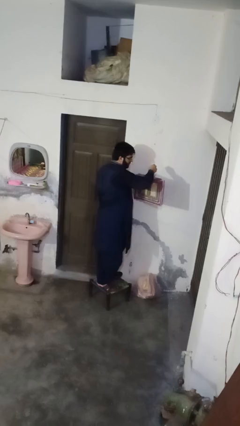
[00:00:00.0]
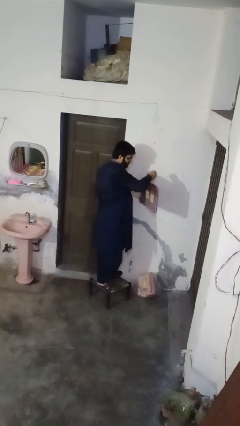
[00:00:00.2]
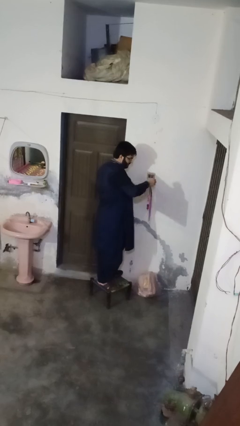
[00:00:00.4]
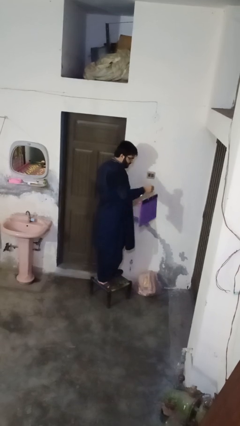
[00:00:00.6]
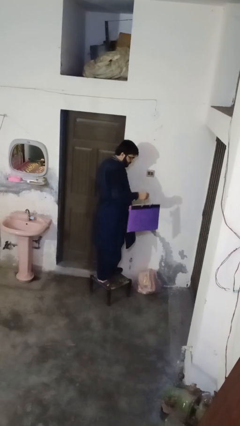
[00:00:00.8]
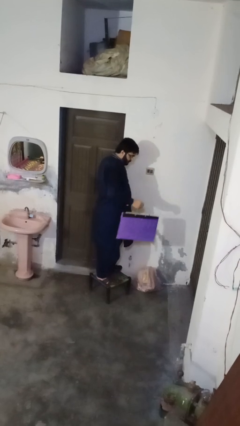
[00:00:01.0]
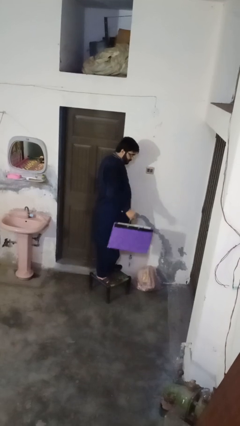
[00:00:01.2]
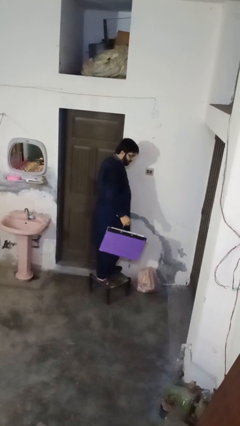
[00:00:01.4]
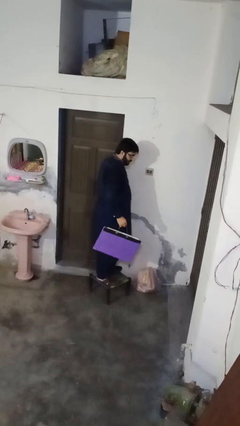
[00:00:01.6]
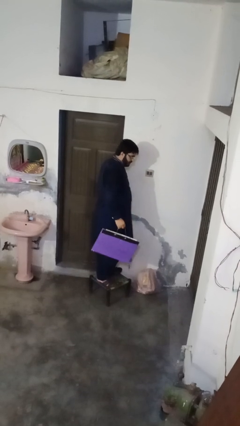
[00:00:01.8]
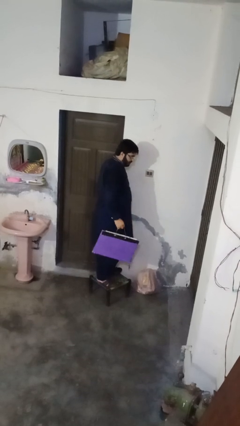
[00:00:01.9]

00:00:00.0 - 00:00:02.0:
person takes down picture frame

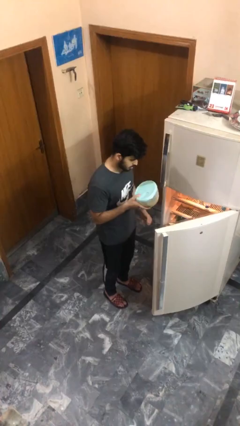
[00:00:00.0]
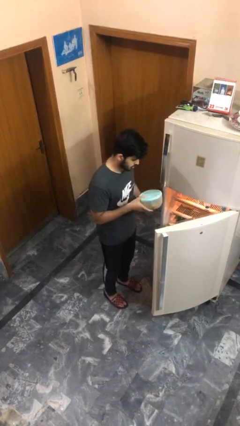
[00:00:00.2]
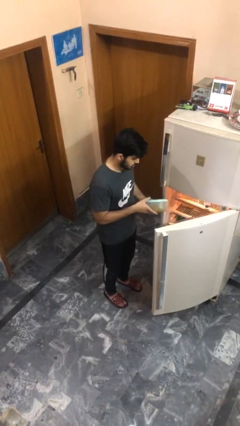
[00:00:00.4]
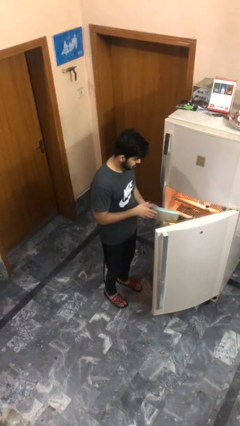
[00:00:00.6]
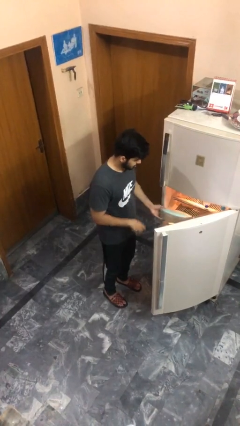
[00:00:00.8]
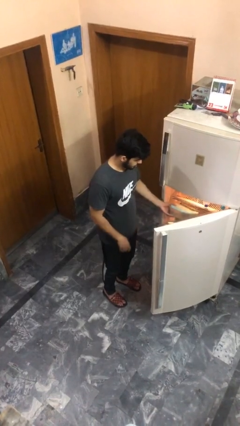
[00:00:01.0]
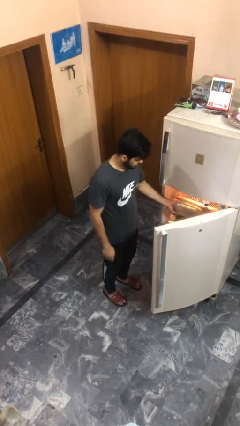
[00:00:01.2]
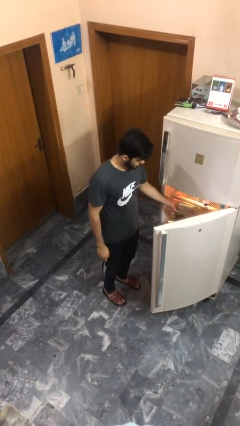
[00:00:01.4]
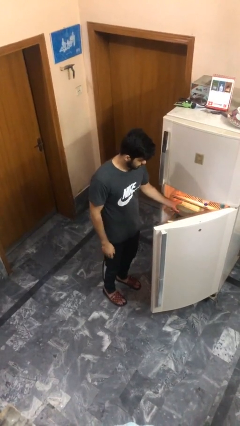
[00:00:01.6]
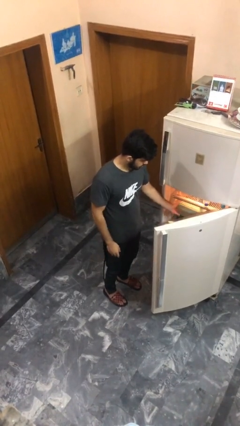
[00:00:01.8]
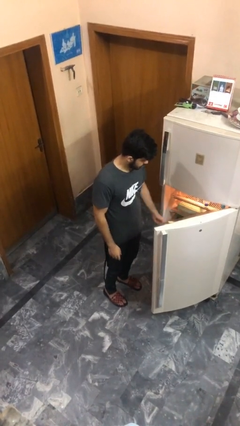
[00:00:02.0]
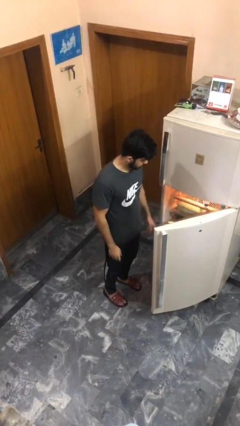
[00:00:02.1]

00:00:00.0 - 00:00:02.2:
person puts down object into cabinet

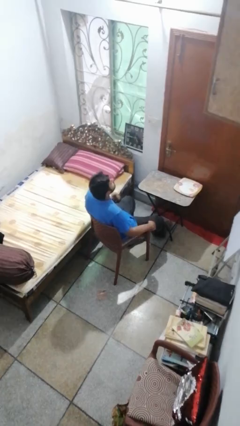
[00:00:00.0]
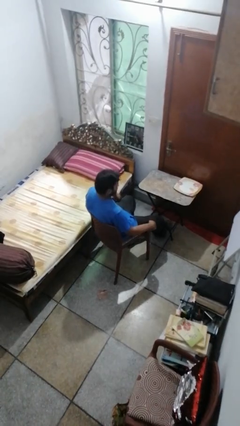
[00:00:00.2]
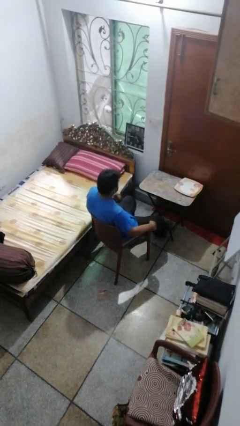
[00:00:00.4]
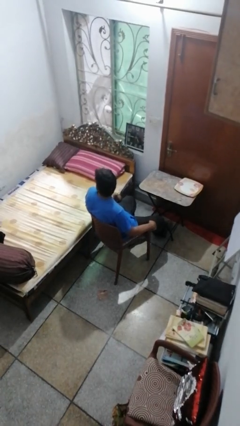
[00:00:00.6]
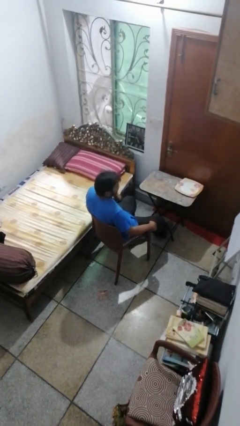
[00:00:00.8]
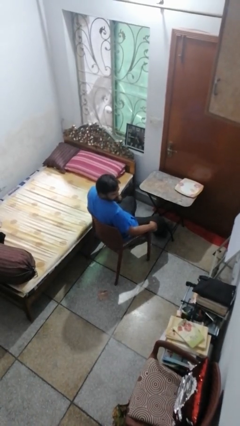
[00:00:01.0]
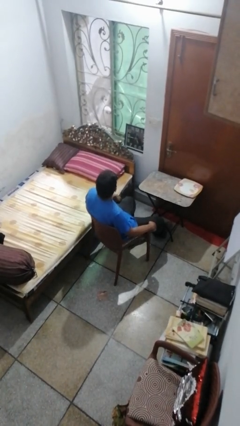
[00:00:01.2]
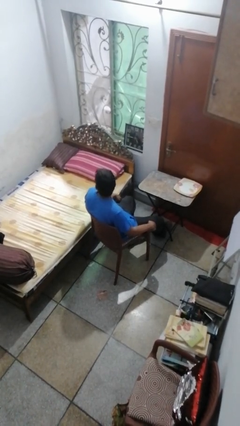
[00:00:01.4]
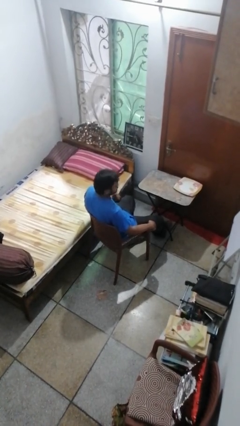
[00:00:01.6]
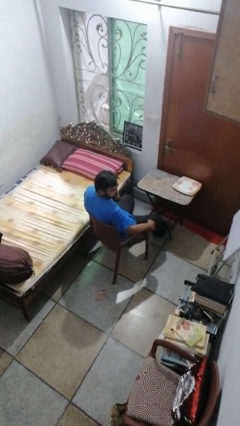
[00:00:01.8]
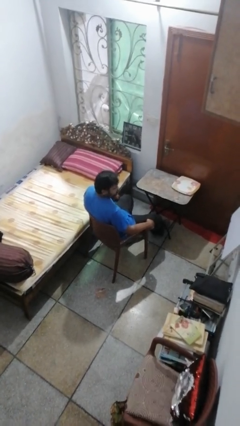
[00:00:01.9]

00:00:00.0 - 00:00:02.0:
person shakes head

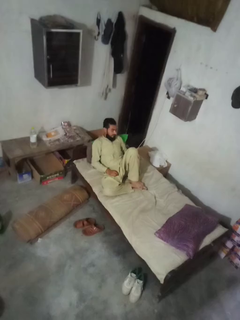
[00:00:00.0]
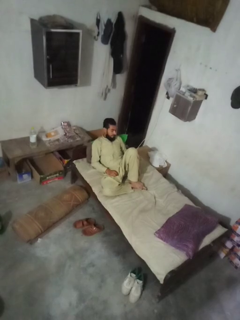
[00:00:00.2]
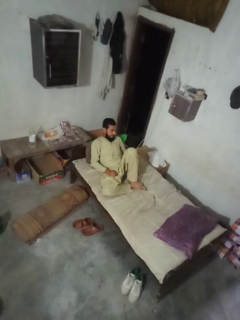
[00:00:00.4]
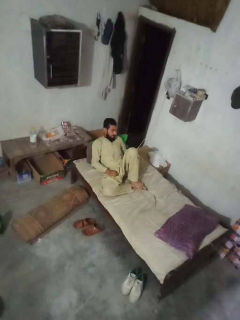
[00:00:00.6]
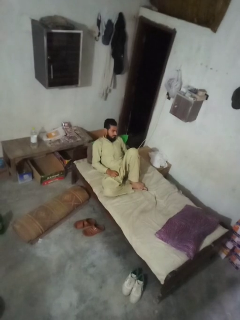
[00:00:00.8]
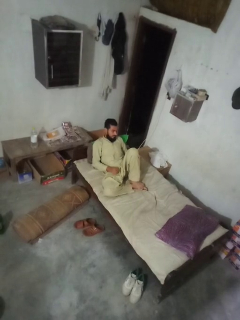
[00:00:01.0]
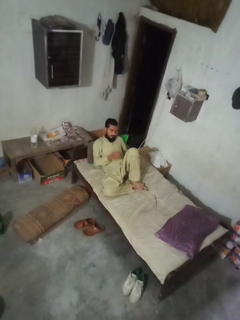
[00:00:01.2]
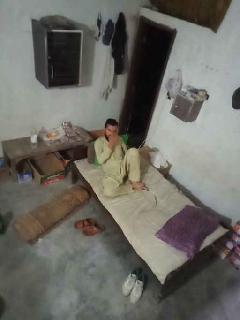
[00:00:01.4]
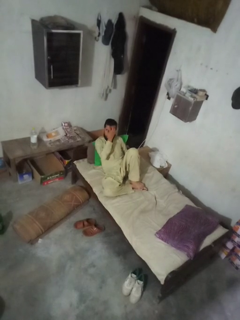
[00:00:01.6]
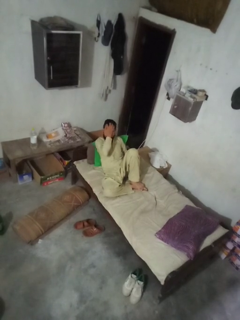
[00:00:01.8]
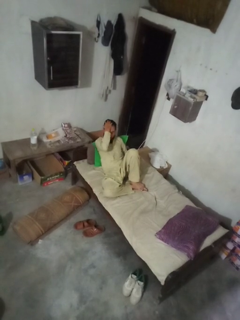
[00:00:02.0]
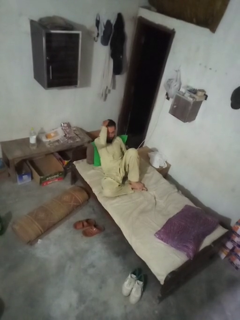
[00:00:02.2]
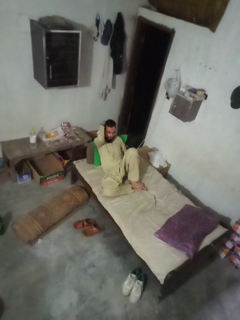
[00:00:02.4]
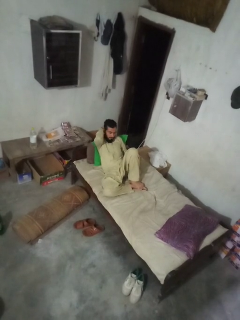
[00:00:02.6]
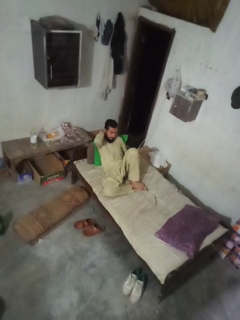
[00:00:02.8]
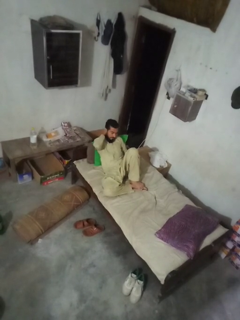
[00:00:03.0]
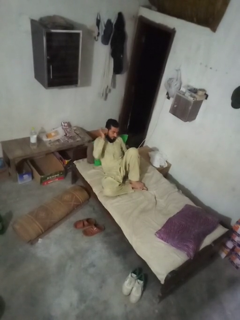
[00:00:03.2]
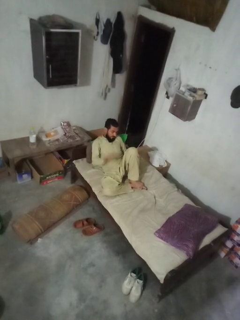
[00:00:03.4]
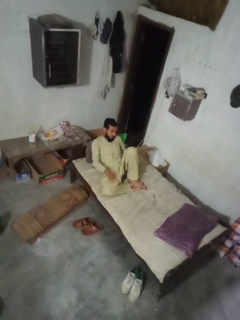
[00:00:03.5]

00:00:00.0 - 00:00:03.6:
person strokes hair

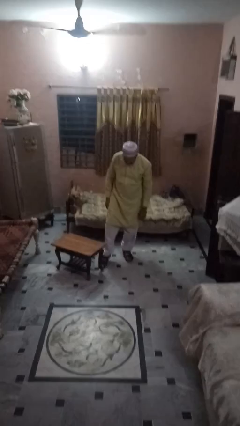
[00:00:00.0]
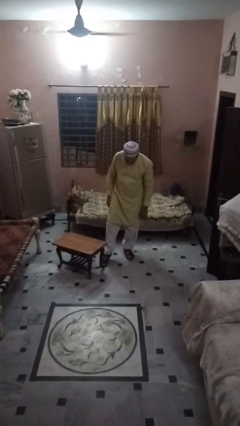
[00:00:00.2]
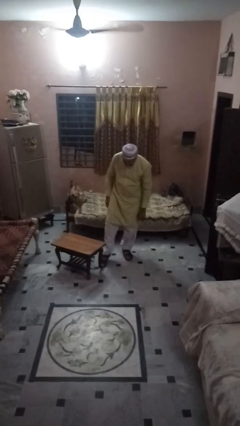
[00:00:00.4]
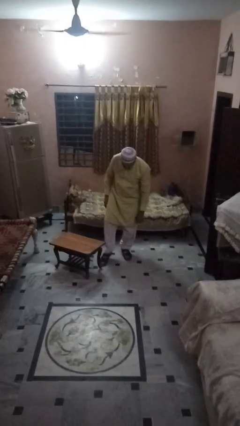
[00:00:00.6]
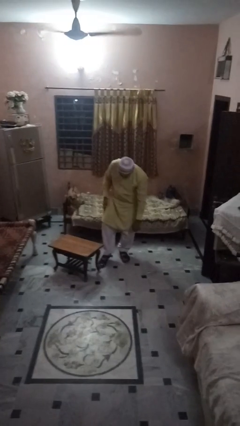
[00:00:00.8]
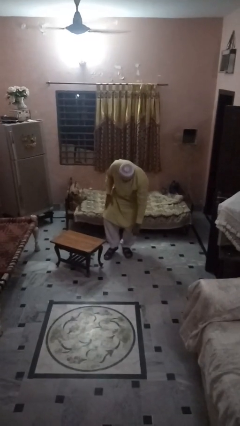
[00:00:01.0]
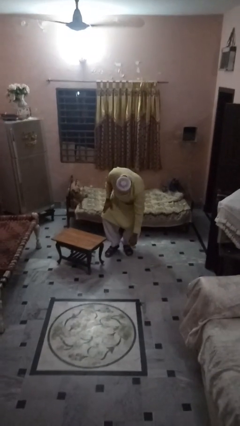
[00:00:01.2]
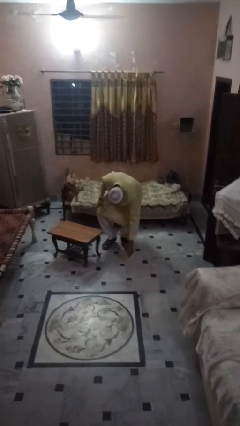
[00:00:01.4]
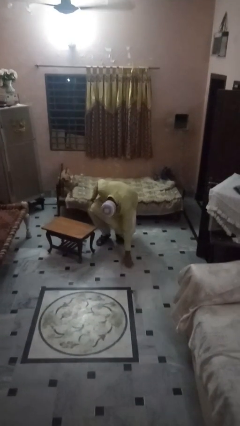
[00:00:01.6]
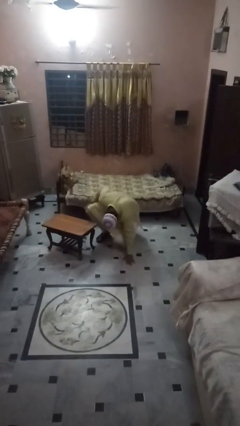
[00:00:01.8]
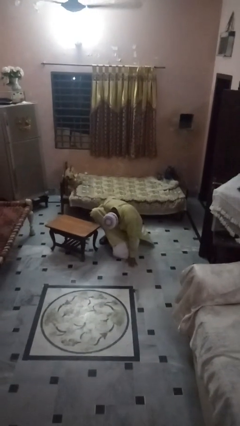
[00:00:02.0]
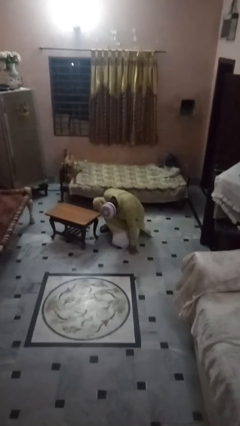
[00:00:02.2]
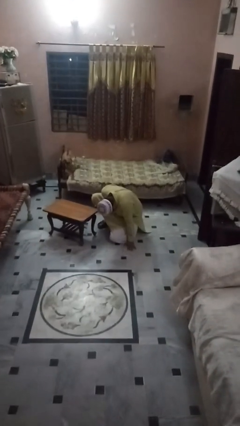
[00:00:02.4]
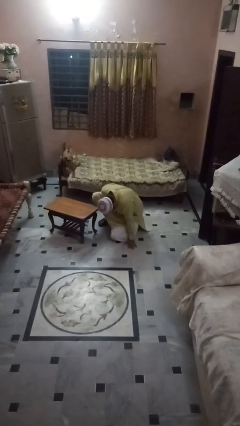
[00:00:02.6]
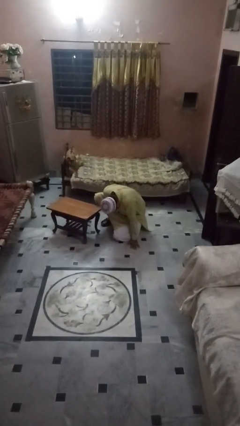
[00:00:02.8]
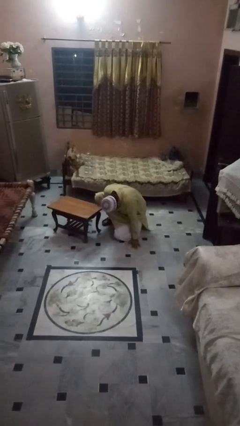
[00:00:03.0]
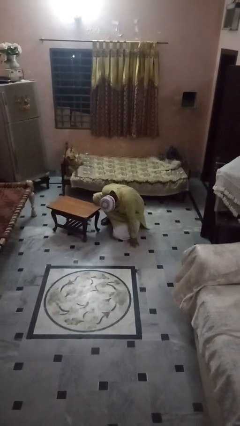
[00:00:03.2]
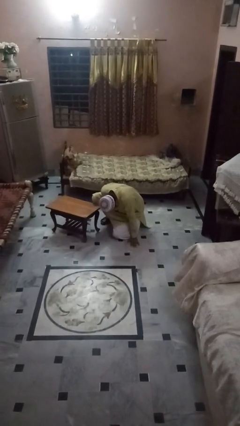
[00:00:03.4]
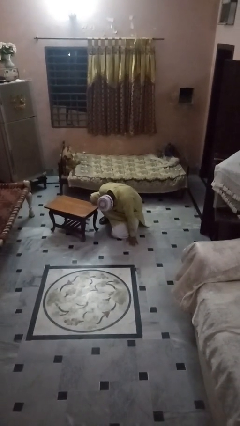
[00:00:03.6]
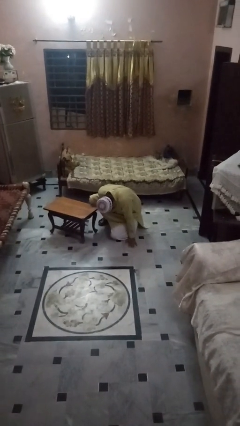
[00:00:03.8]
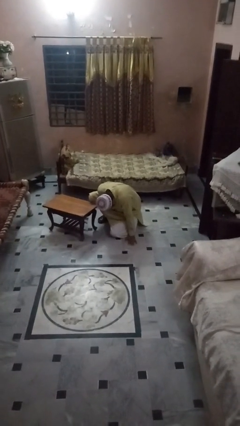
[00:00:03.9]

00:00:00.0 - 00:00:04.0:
person lies down on floor

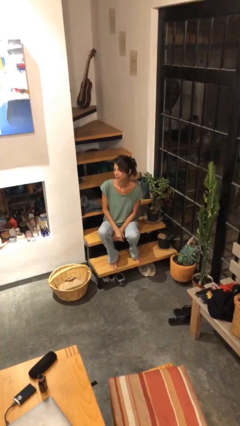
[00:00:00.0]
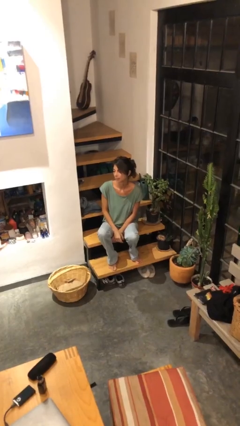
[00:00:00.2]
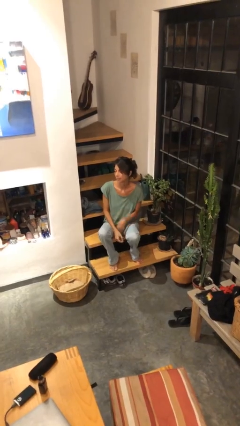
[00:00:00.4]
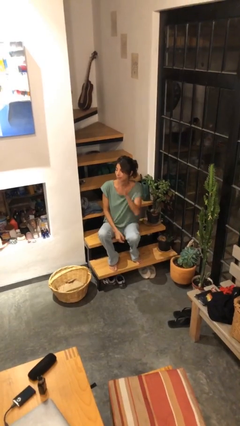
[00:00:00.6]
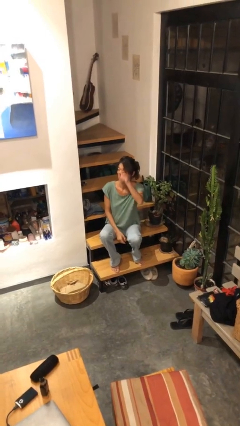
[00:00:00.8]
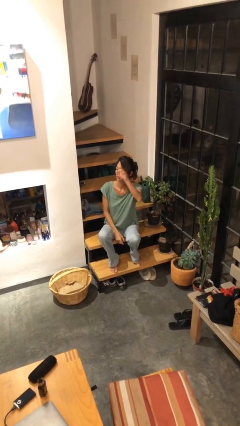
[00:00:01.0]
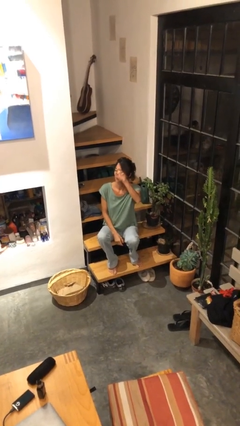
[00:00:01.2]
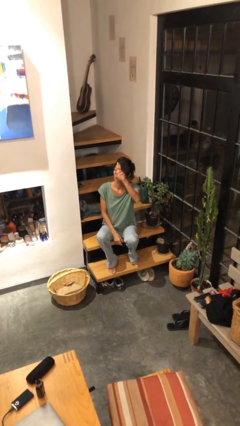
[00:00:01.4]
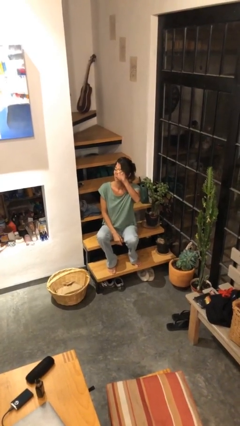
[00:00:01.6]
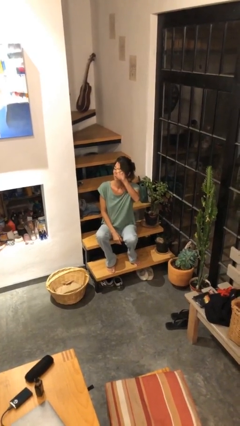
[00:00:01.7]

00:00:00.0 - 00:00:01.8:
person gestures raise hand

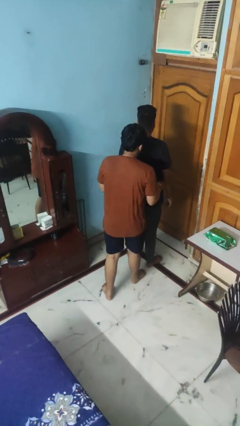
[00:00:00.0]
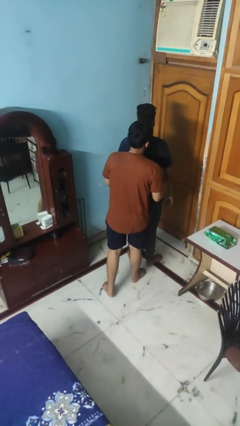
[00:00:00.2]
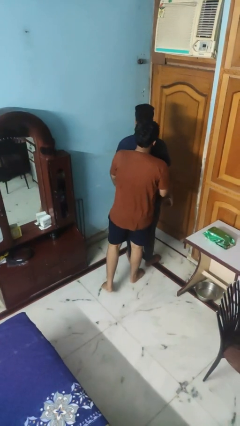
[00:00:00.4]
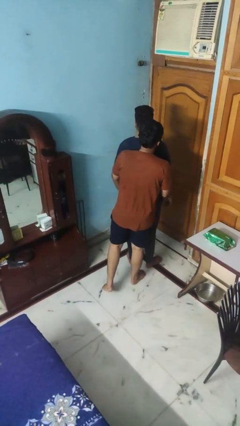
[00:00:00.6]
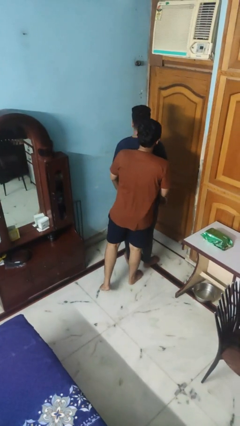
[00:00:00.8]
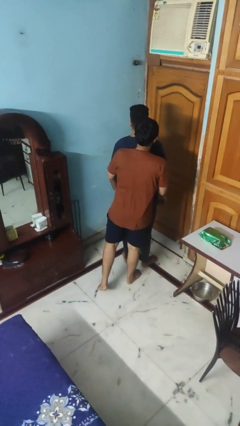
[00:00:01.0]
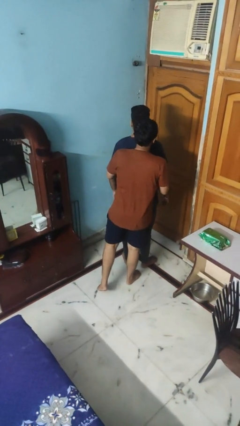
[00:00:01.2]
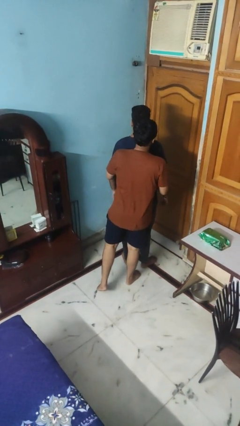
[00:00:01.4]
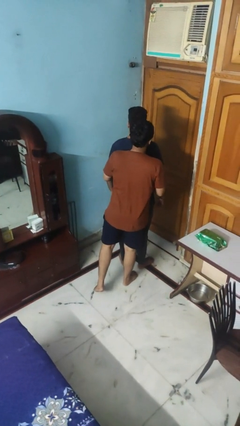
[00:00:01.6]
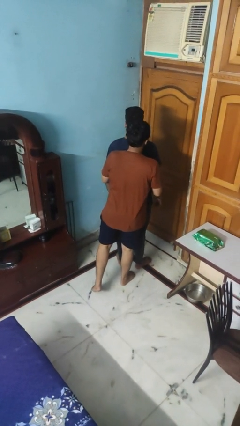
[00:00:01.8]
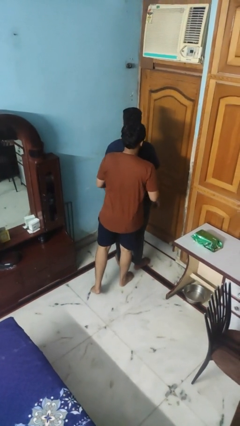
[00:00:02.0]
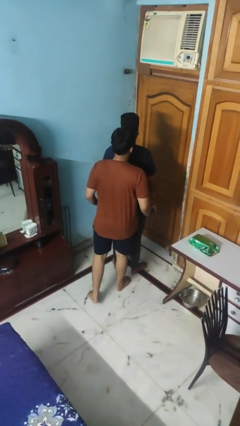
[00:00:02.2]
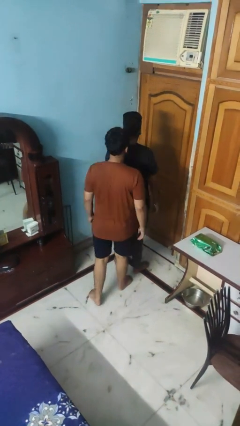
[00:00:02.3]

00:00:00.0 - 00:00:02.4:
person hugs person from behind
